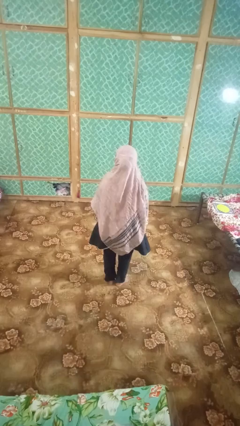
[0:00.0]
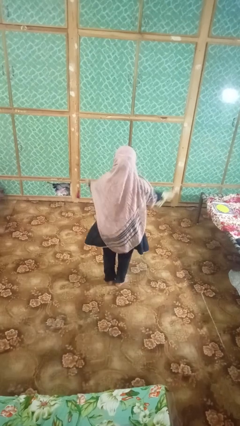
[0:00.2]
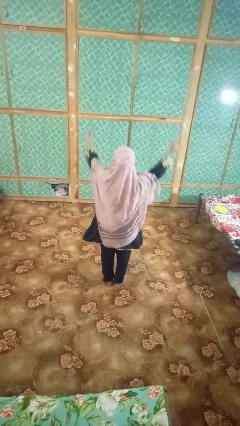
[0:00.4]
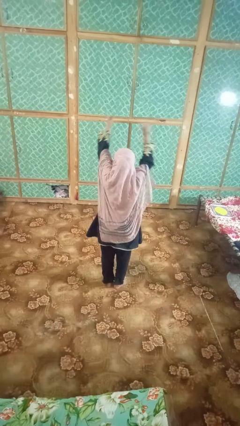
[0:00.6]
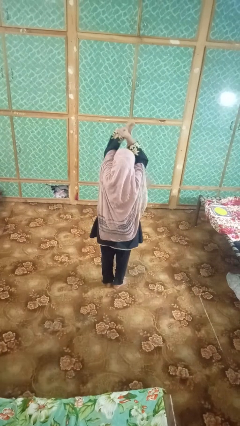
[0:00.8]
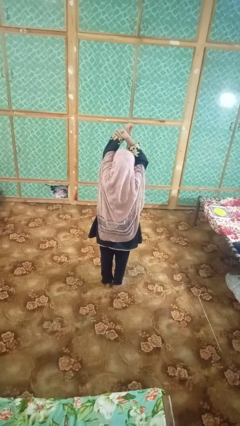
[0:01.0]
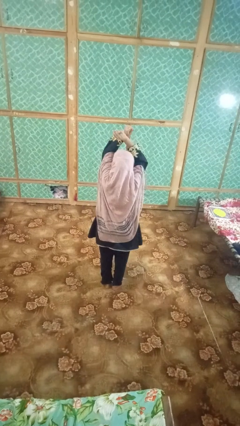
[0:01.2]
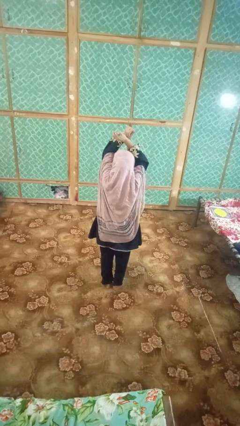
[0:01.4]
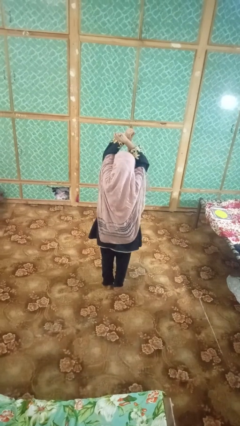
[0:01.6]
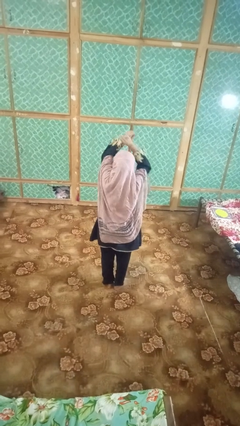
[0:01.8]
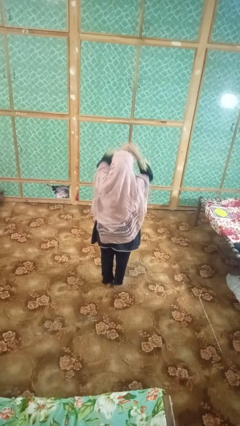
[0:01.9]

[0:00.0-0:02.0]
person gestures arms x

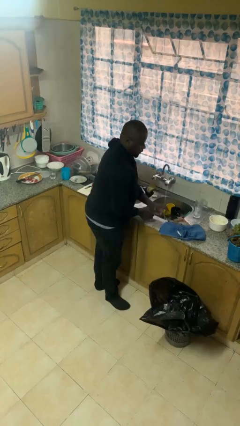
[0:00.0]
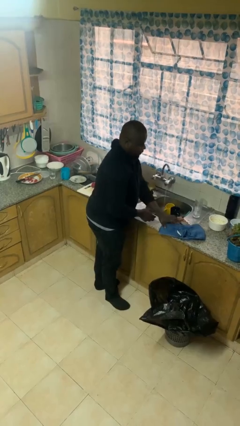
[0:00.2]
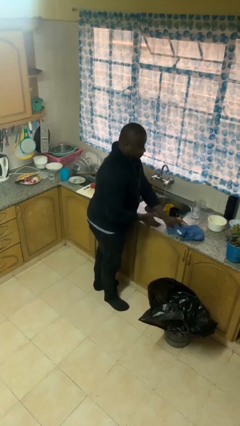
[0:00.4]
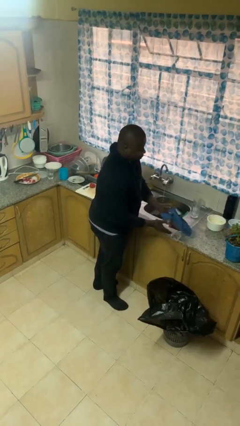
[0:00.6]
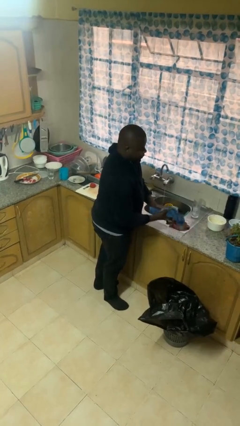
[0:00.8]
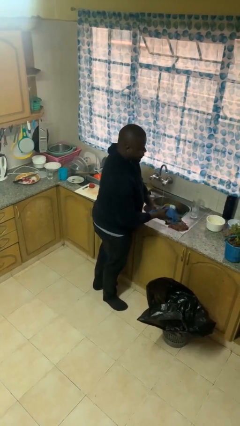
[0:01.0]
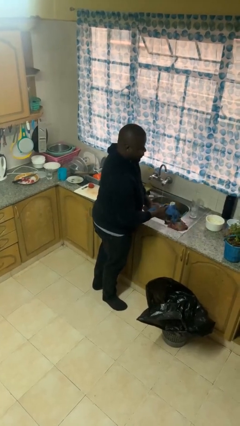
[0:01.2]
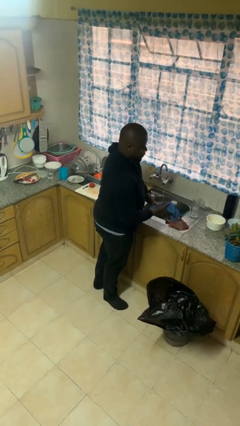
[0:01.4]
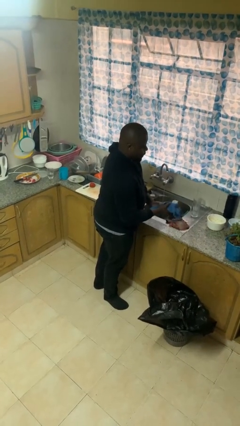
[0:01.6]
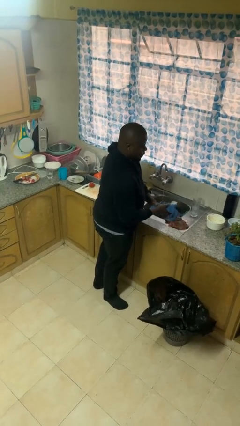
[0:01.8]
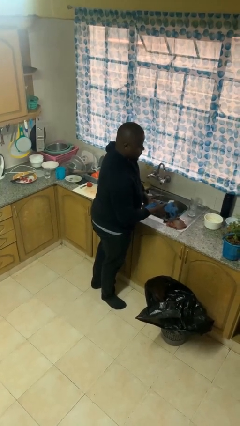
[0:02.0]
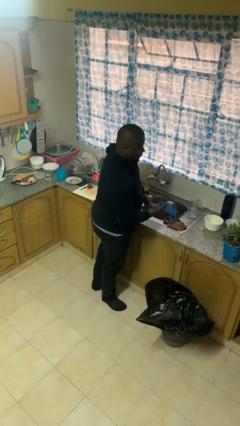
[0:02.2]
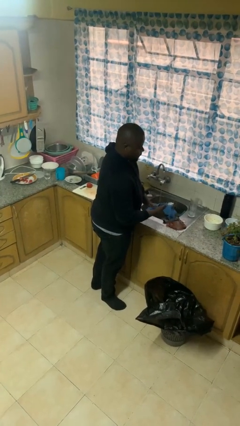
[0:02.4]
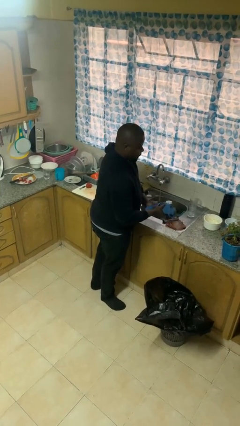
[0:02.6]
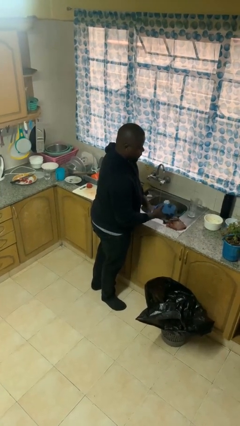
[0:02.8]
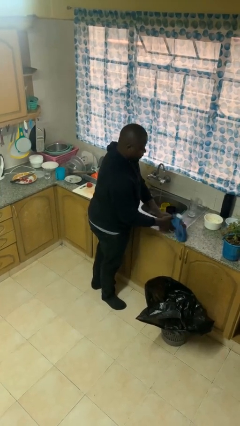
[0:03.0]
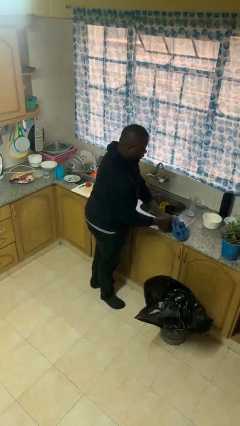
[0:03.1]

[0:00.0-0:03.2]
person dries hands with towel

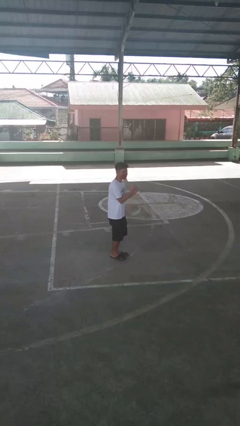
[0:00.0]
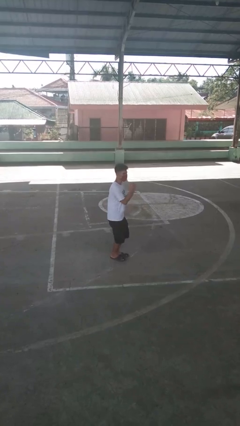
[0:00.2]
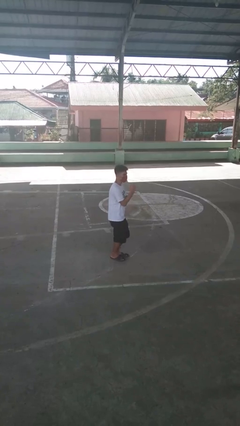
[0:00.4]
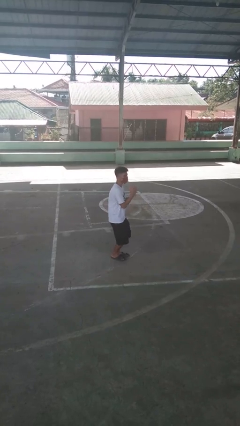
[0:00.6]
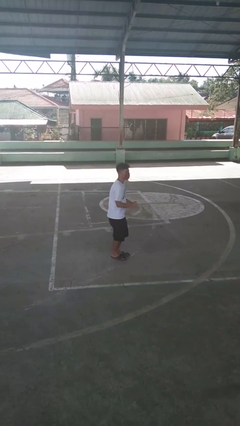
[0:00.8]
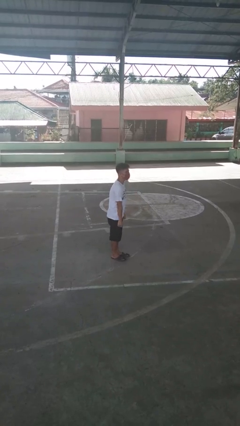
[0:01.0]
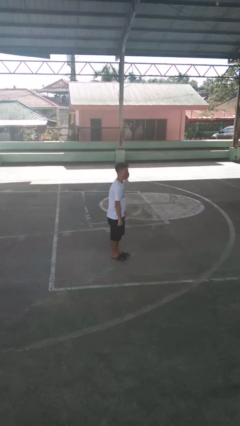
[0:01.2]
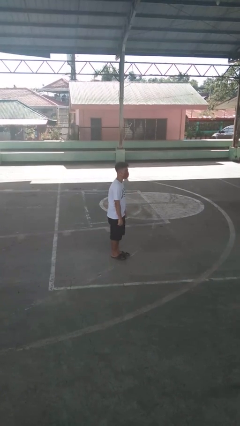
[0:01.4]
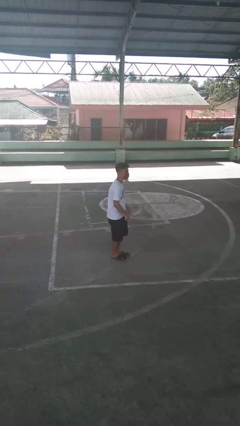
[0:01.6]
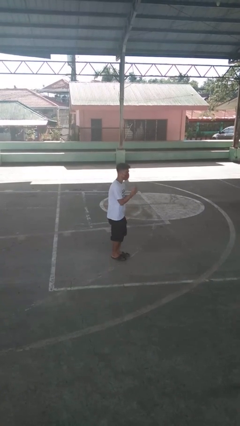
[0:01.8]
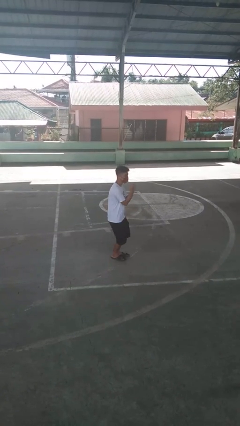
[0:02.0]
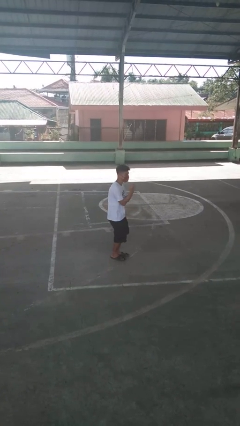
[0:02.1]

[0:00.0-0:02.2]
person dances in place

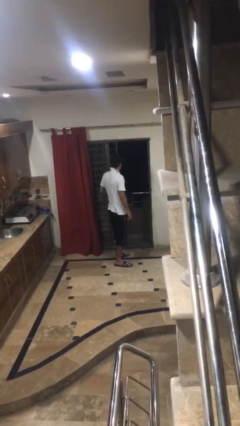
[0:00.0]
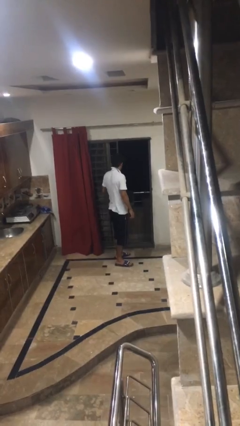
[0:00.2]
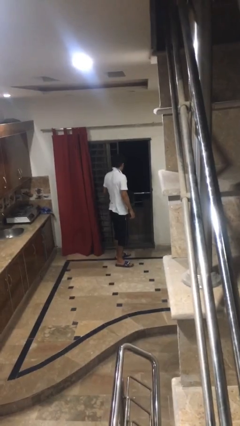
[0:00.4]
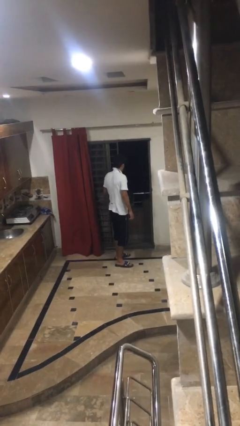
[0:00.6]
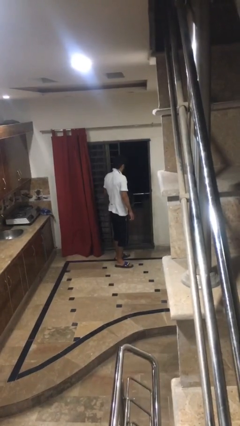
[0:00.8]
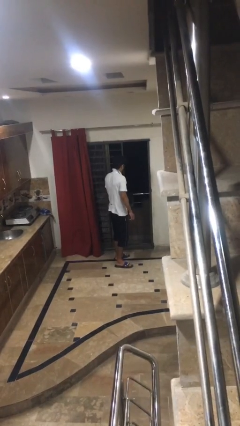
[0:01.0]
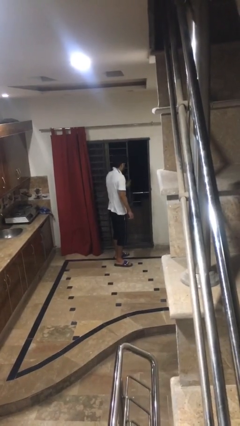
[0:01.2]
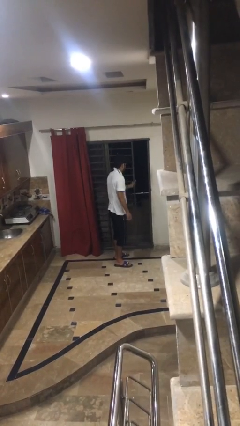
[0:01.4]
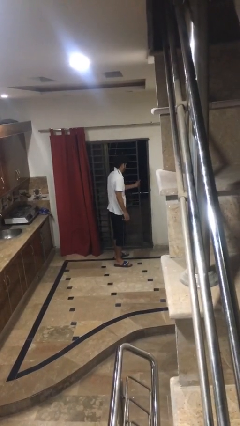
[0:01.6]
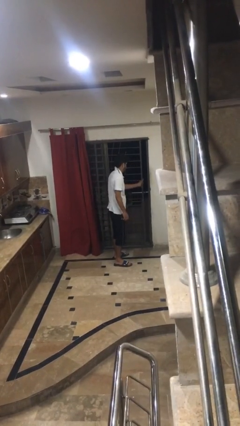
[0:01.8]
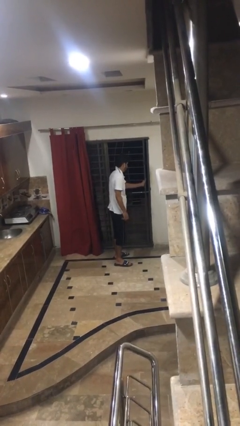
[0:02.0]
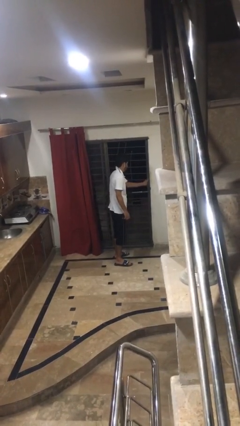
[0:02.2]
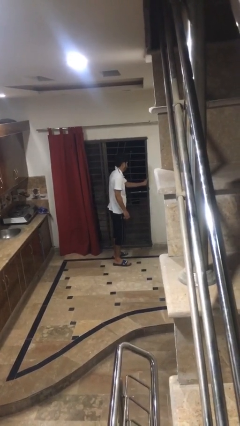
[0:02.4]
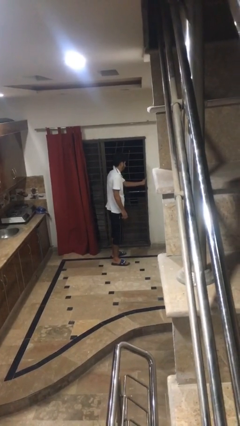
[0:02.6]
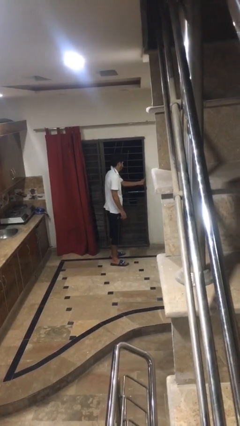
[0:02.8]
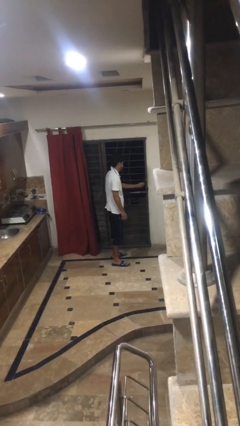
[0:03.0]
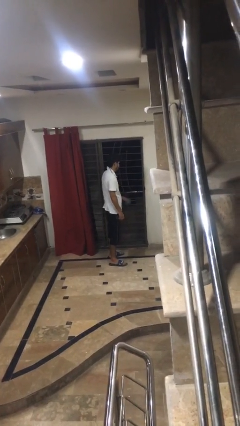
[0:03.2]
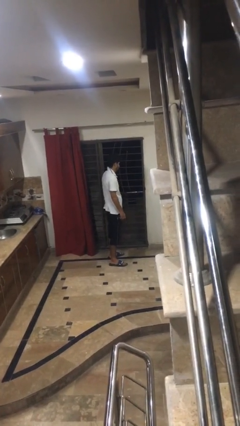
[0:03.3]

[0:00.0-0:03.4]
person closes facility door

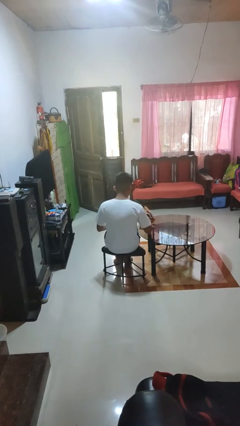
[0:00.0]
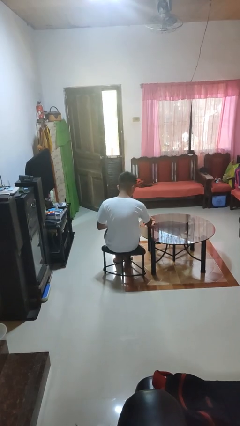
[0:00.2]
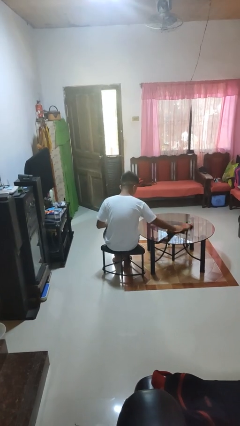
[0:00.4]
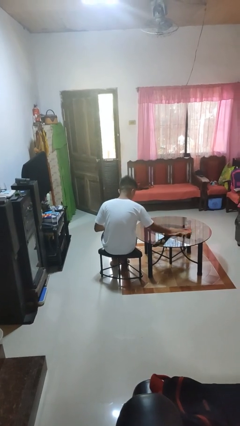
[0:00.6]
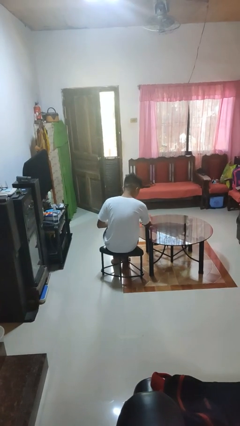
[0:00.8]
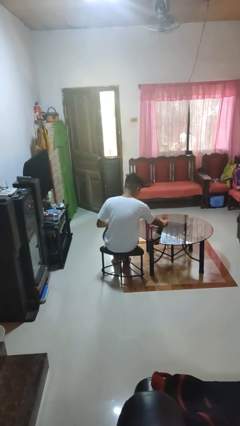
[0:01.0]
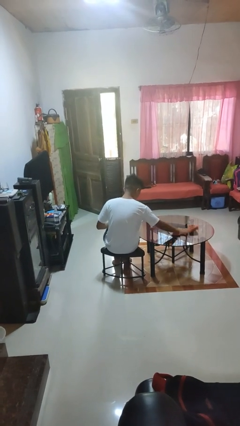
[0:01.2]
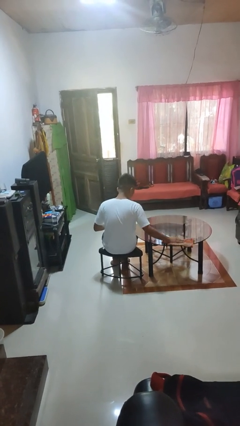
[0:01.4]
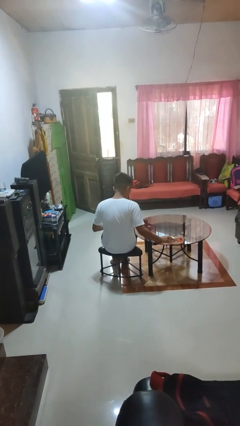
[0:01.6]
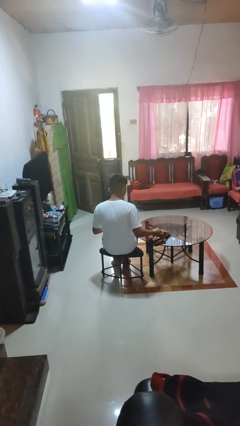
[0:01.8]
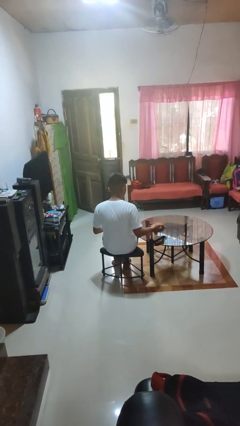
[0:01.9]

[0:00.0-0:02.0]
person cleans table with rag

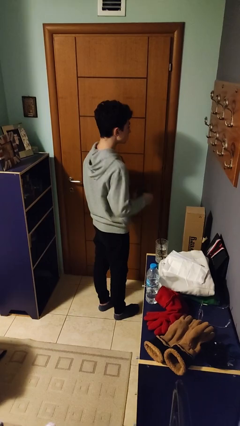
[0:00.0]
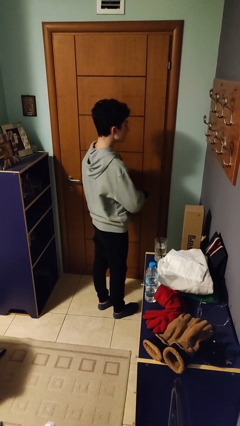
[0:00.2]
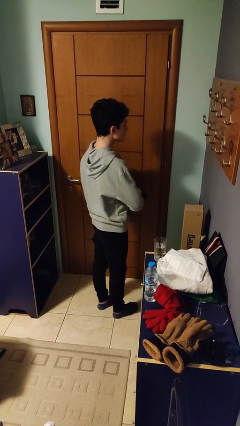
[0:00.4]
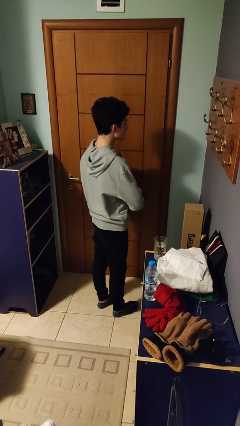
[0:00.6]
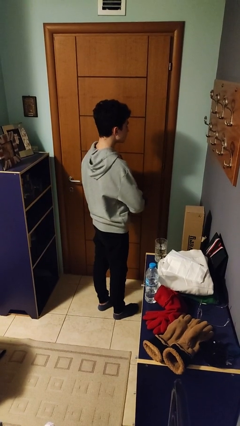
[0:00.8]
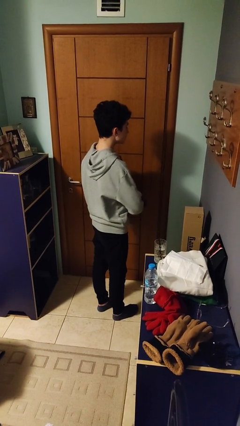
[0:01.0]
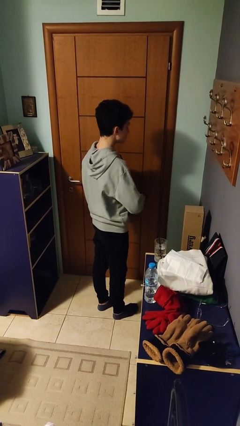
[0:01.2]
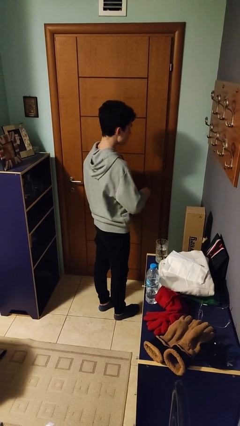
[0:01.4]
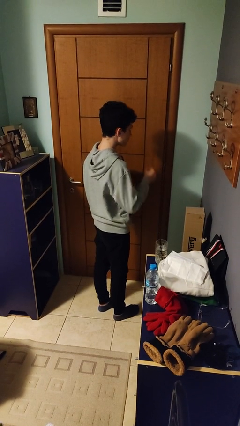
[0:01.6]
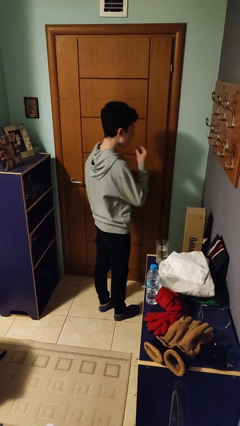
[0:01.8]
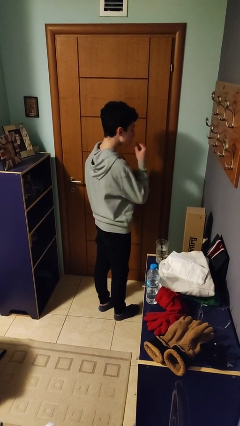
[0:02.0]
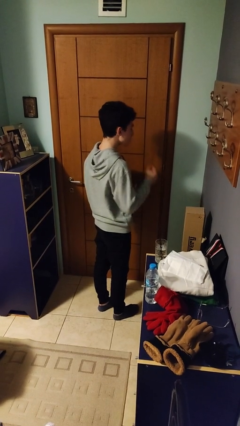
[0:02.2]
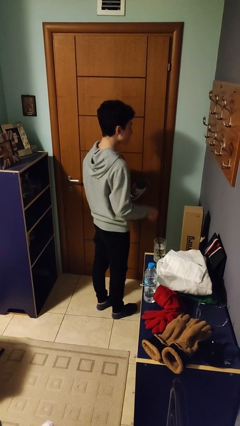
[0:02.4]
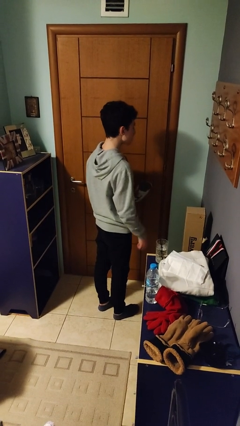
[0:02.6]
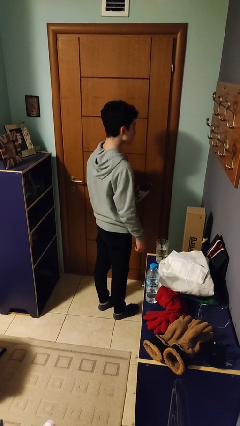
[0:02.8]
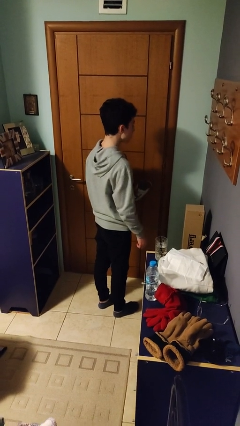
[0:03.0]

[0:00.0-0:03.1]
person eats snack from bag

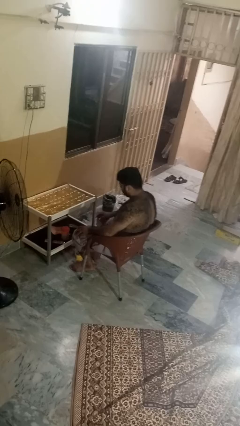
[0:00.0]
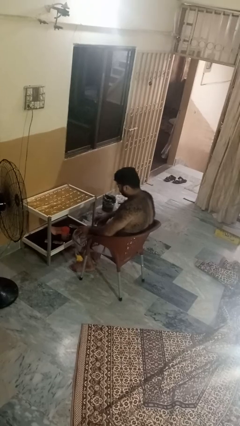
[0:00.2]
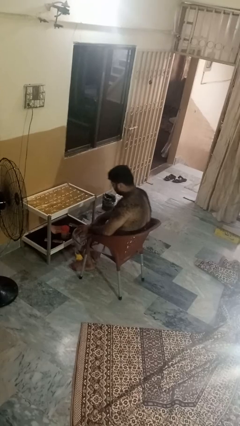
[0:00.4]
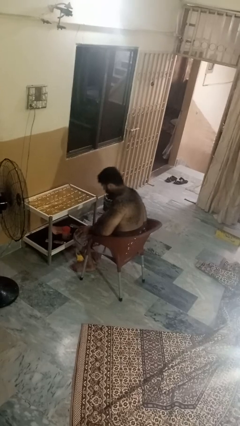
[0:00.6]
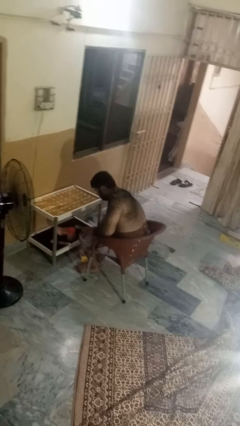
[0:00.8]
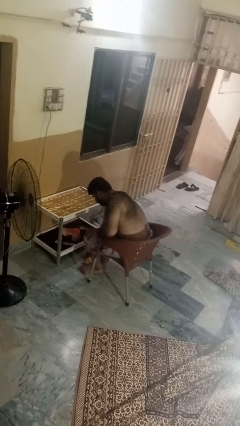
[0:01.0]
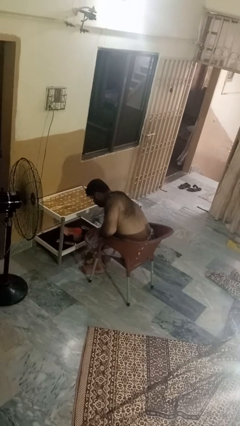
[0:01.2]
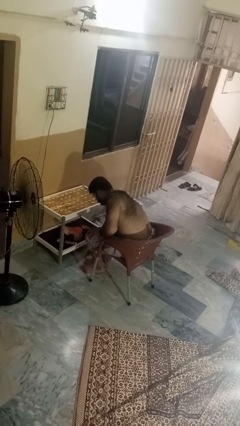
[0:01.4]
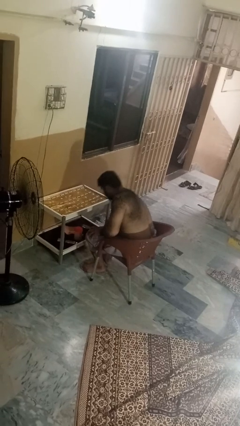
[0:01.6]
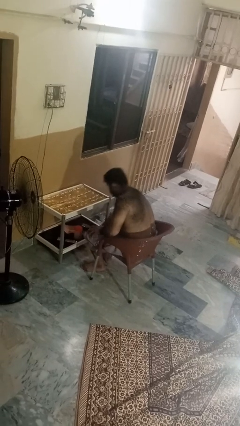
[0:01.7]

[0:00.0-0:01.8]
person picks up object from floor
